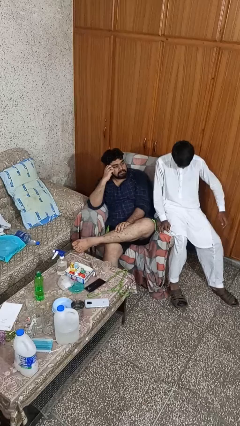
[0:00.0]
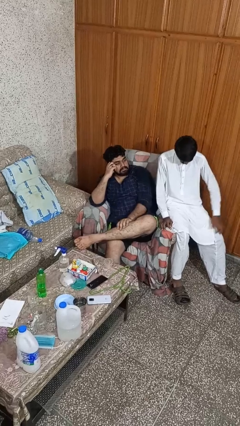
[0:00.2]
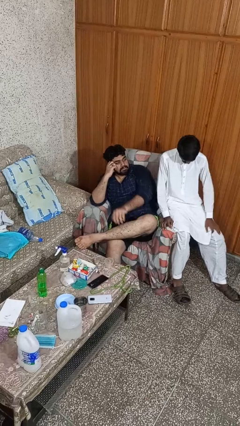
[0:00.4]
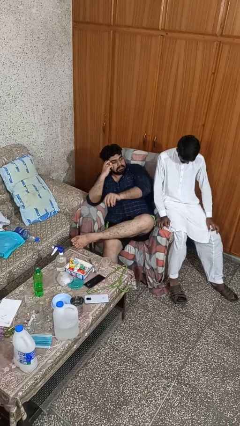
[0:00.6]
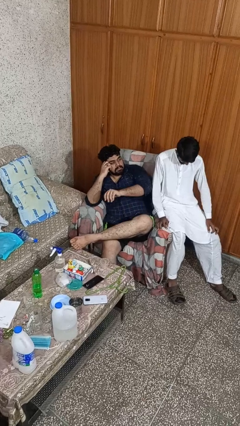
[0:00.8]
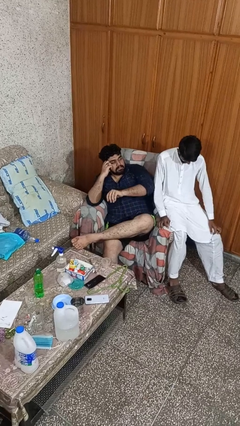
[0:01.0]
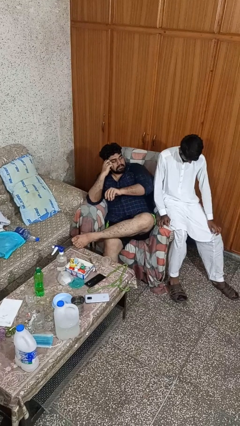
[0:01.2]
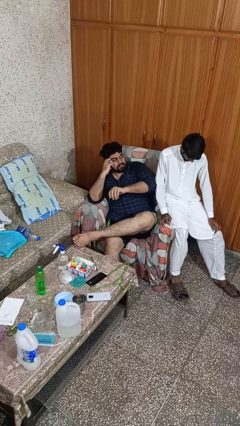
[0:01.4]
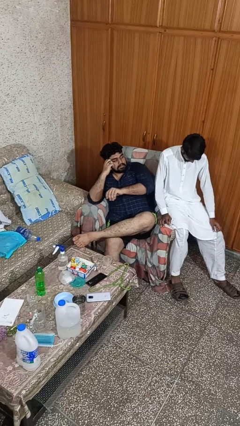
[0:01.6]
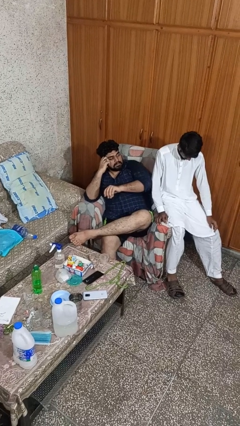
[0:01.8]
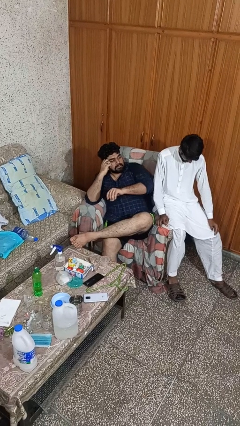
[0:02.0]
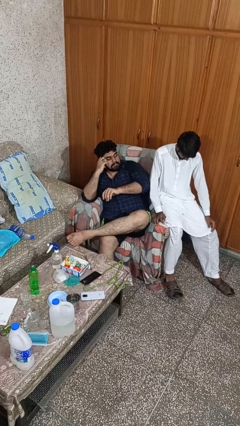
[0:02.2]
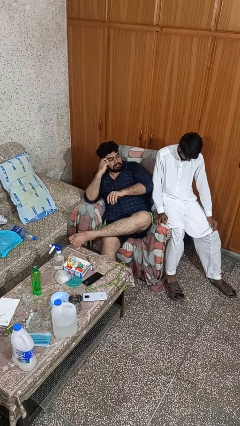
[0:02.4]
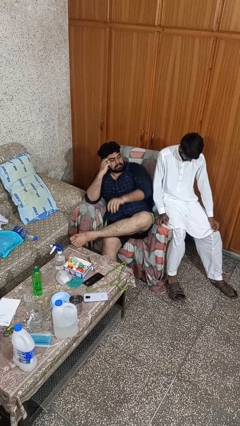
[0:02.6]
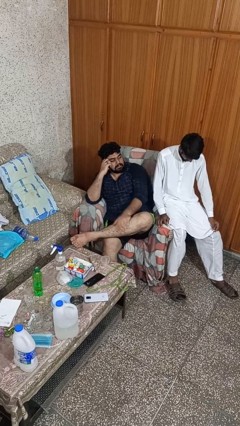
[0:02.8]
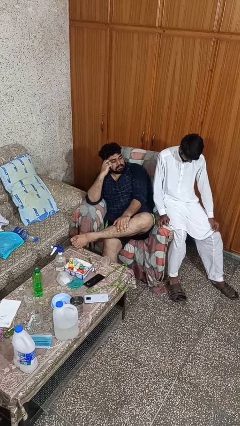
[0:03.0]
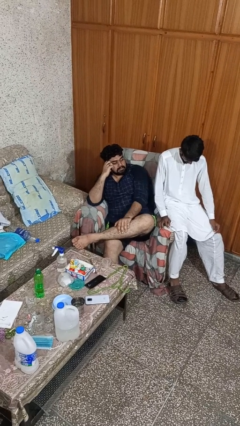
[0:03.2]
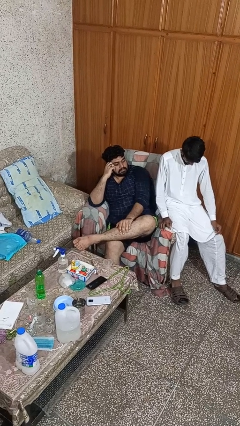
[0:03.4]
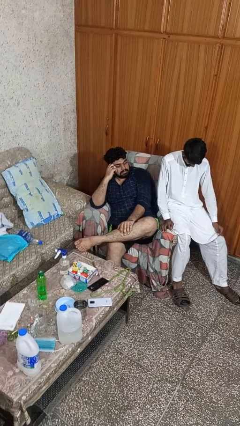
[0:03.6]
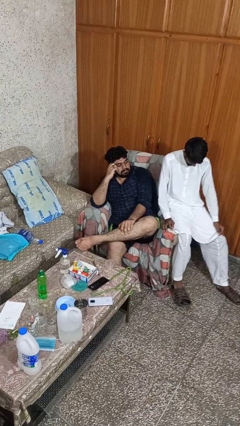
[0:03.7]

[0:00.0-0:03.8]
person nudges person with elbow

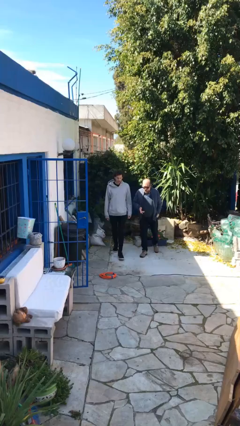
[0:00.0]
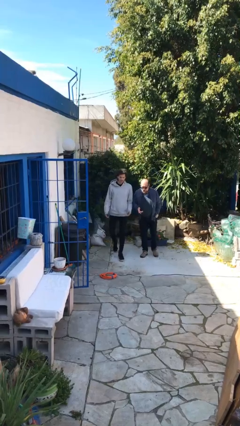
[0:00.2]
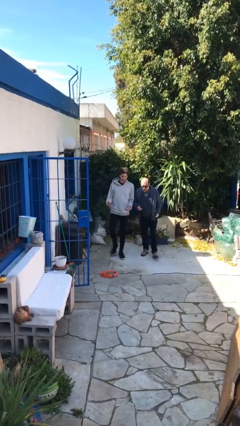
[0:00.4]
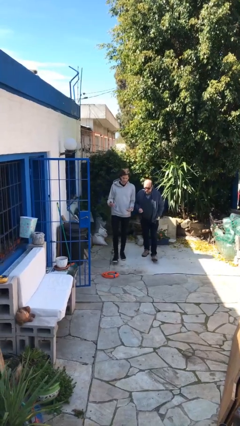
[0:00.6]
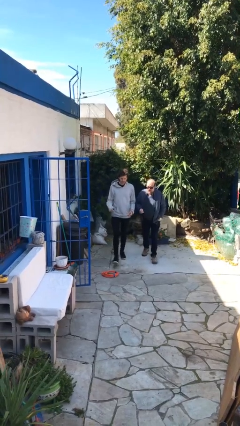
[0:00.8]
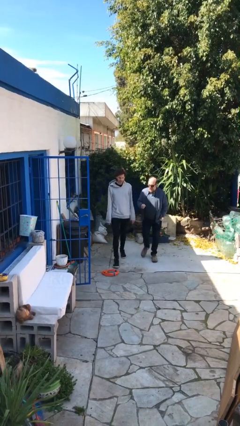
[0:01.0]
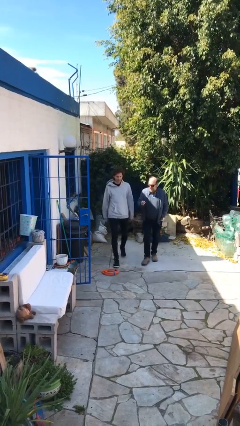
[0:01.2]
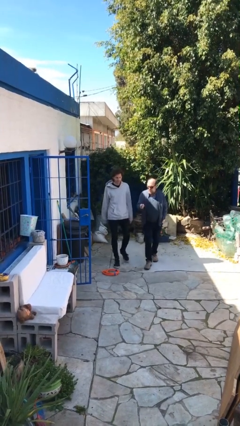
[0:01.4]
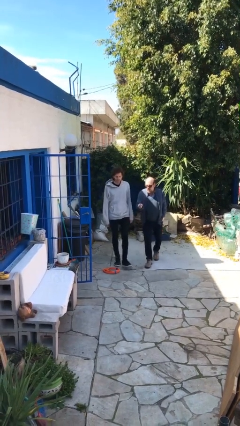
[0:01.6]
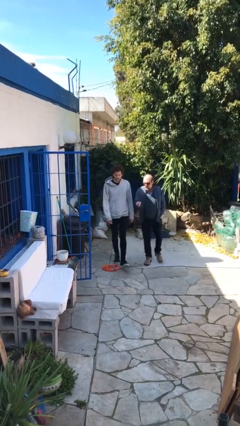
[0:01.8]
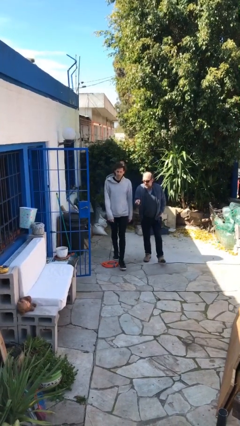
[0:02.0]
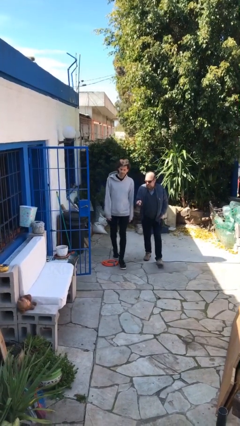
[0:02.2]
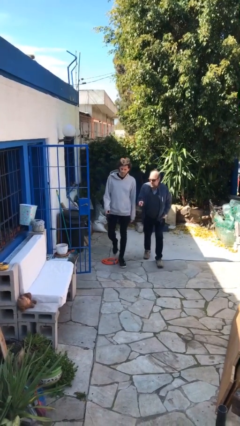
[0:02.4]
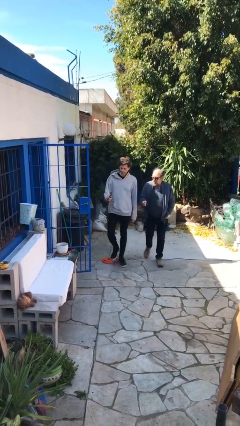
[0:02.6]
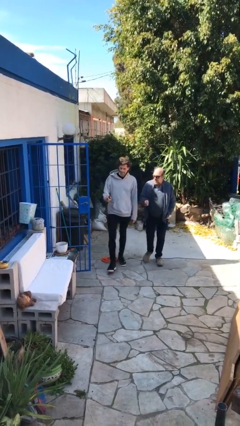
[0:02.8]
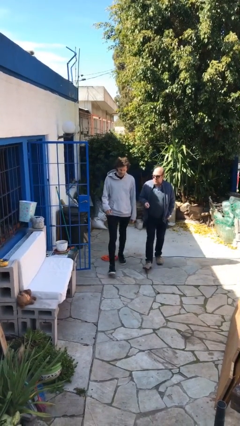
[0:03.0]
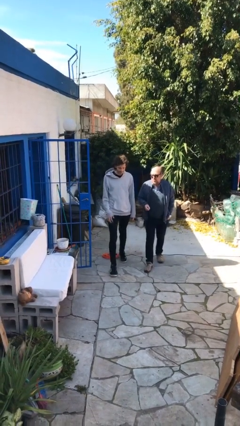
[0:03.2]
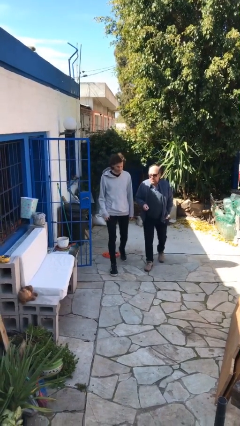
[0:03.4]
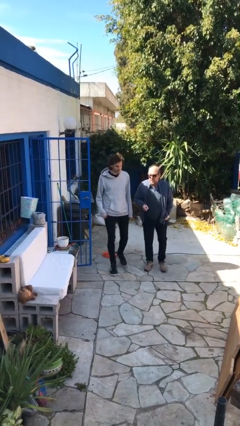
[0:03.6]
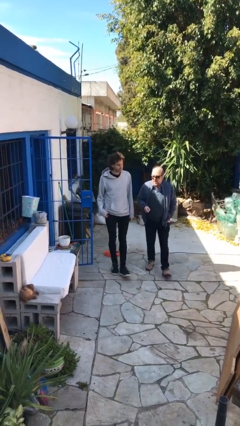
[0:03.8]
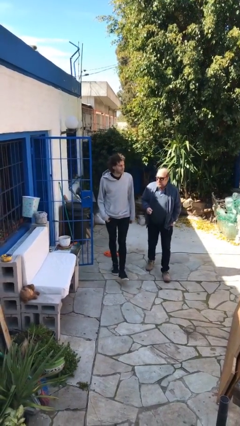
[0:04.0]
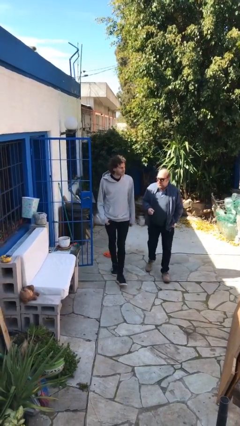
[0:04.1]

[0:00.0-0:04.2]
person talks to person

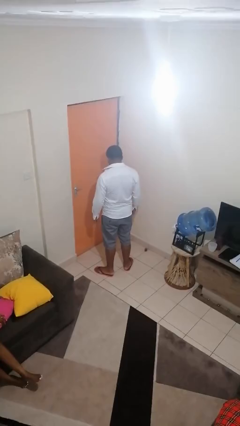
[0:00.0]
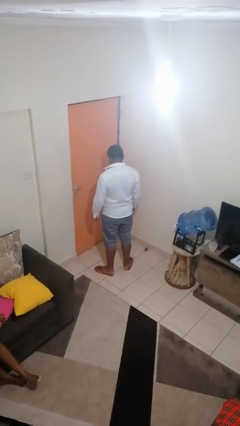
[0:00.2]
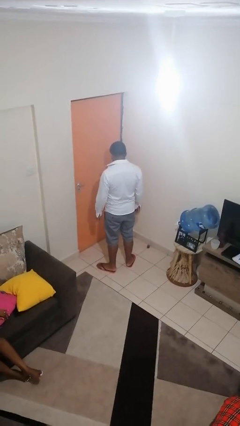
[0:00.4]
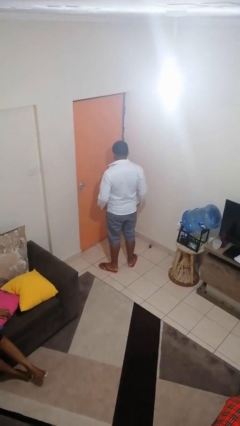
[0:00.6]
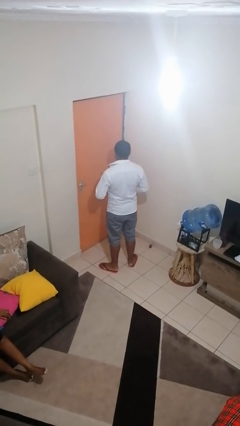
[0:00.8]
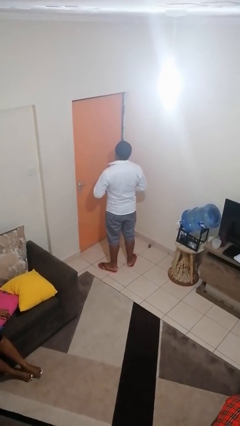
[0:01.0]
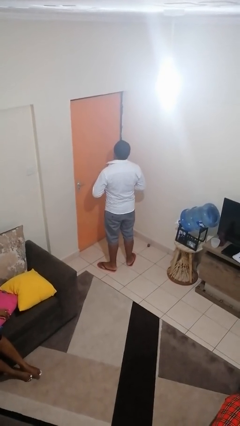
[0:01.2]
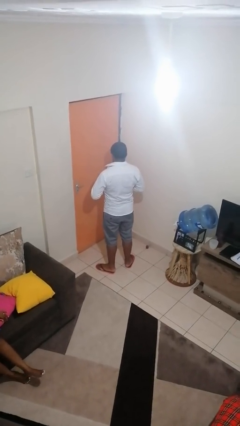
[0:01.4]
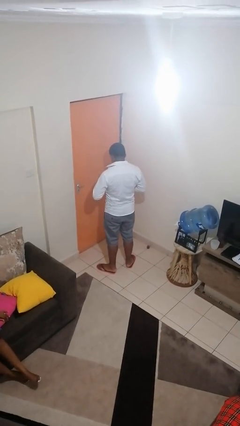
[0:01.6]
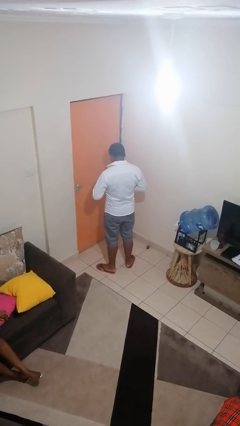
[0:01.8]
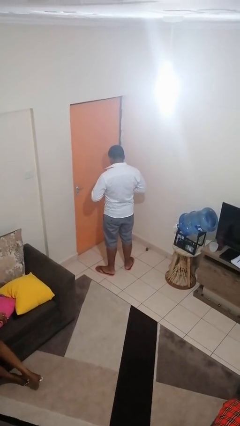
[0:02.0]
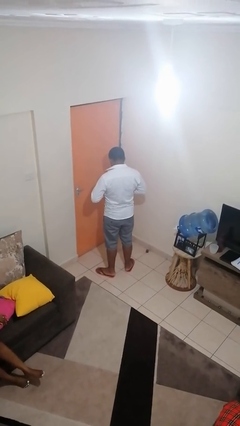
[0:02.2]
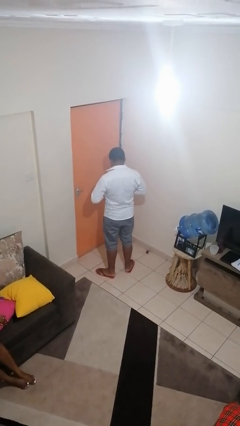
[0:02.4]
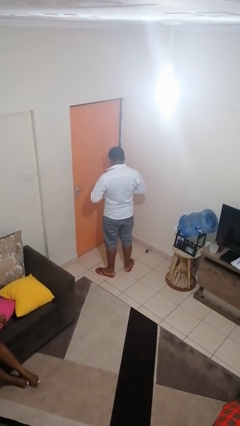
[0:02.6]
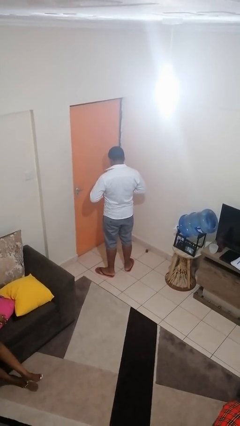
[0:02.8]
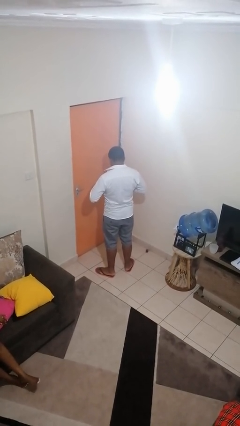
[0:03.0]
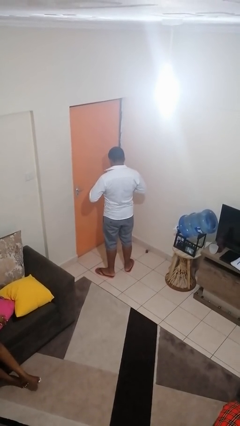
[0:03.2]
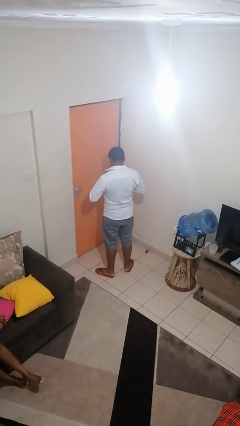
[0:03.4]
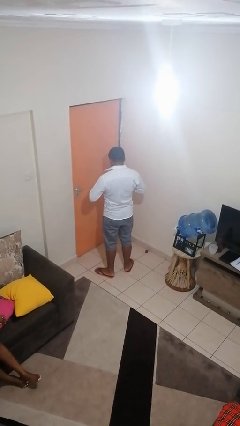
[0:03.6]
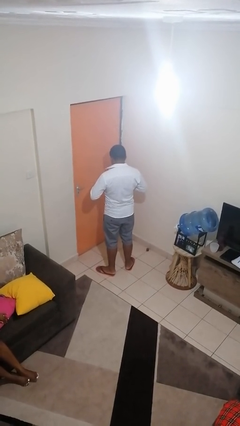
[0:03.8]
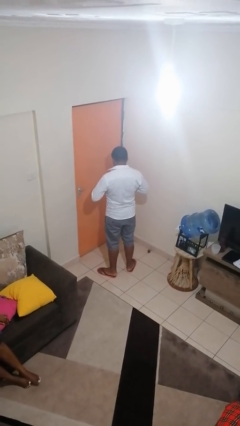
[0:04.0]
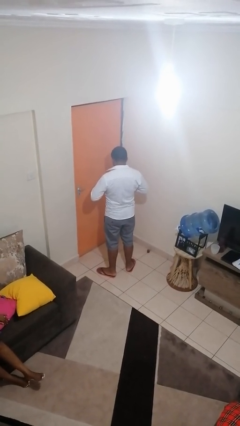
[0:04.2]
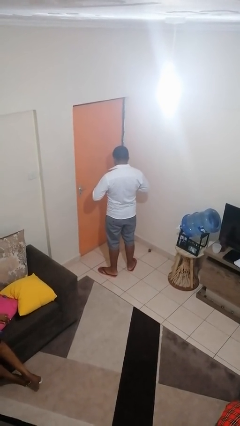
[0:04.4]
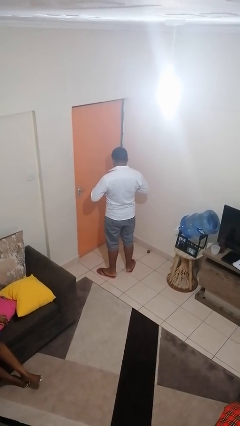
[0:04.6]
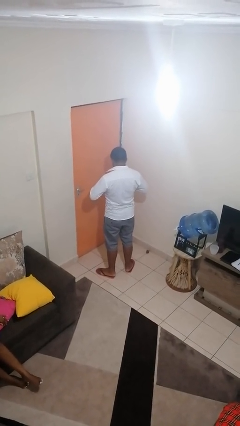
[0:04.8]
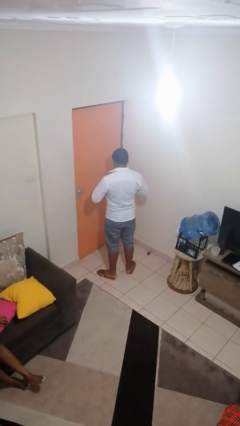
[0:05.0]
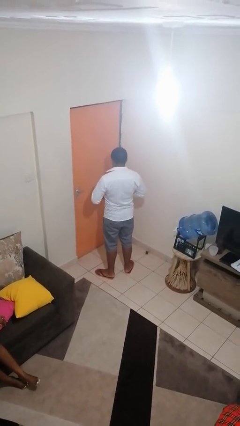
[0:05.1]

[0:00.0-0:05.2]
person buttons shirt

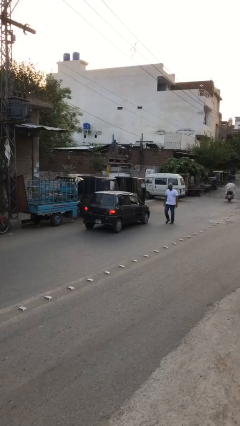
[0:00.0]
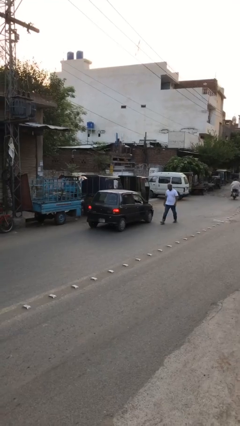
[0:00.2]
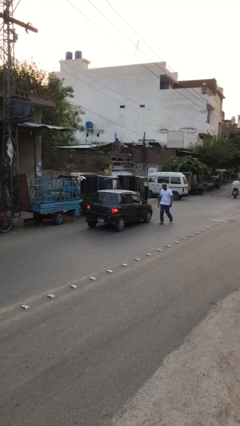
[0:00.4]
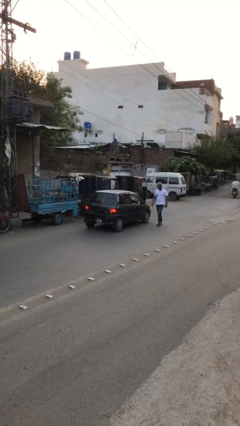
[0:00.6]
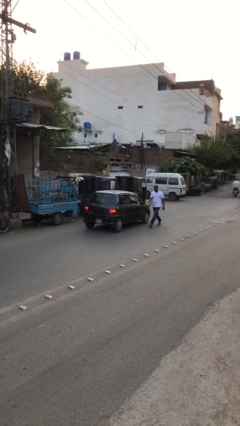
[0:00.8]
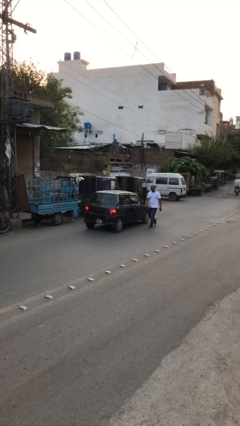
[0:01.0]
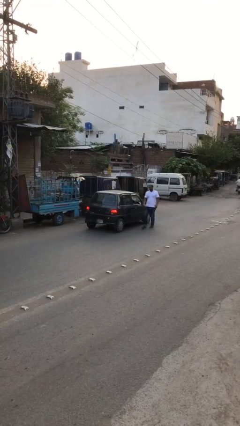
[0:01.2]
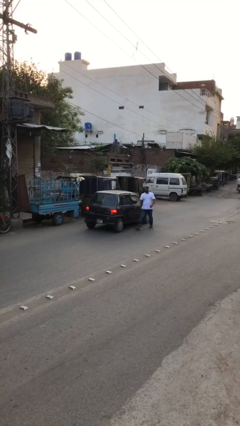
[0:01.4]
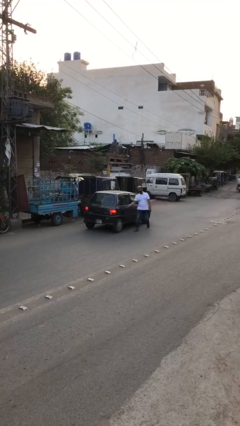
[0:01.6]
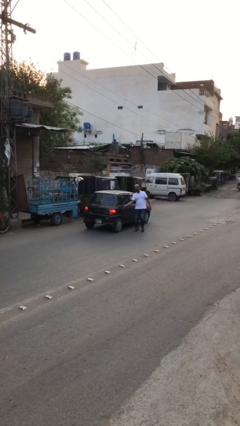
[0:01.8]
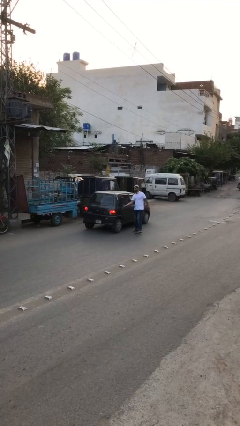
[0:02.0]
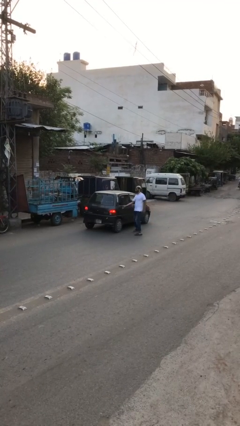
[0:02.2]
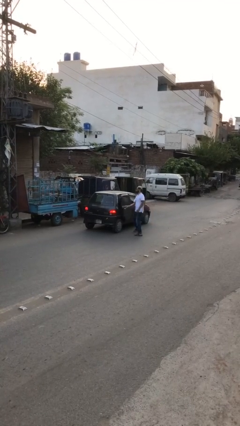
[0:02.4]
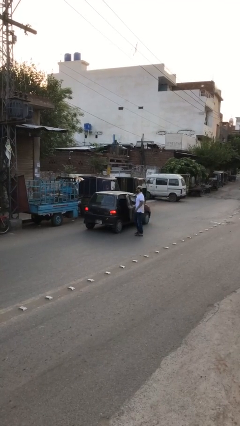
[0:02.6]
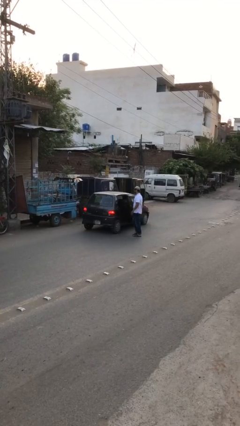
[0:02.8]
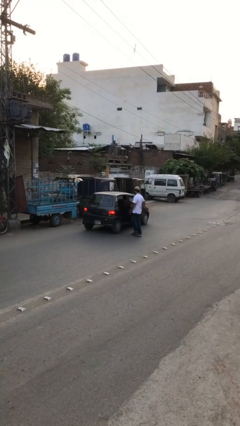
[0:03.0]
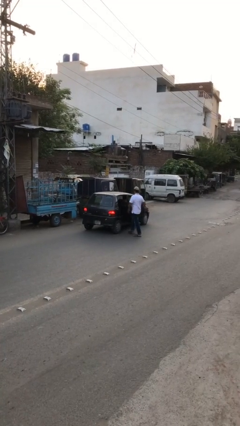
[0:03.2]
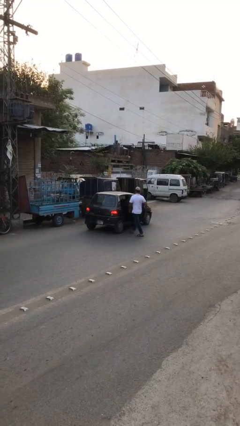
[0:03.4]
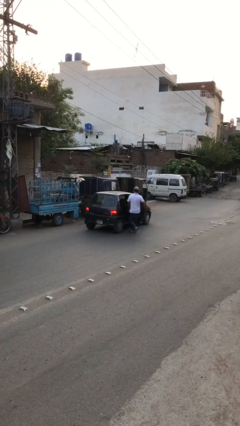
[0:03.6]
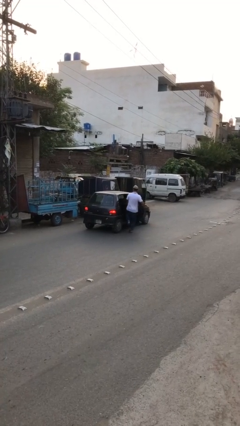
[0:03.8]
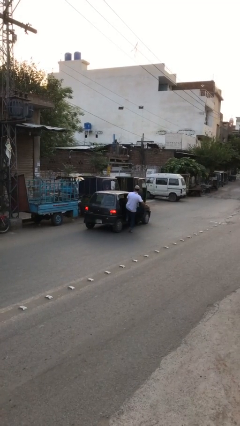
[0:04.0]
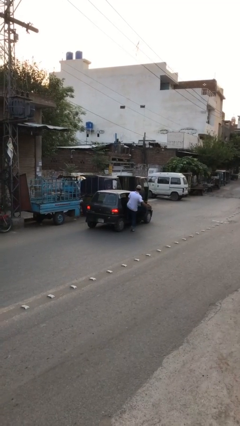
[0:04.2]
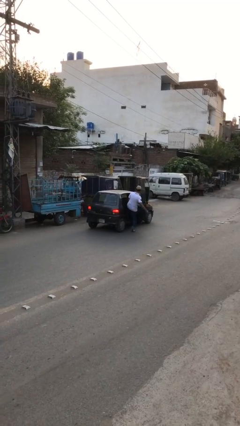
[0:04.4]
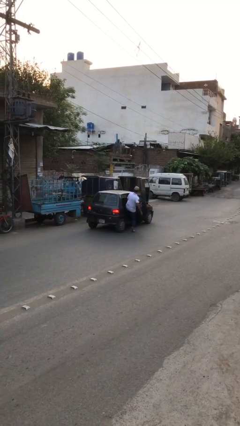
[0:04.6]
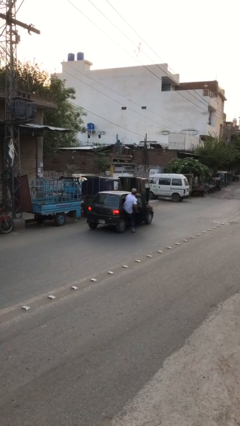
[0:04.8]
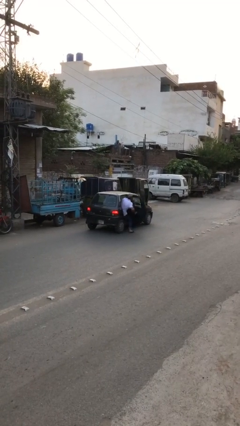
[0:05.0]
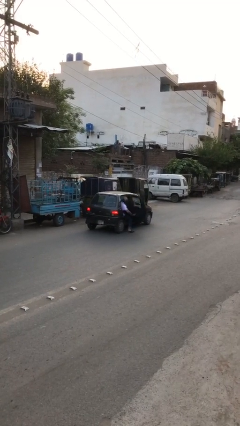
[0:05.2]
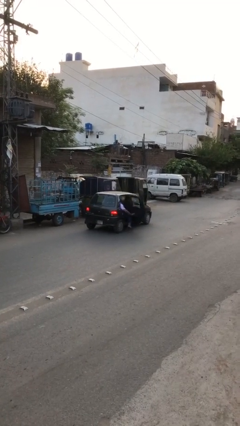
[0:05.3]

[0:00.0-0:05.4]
car picks up person
